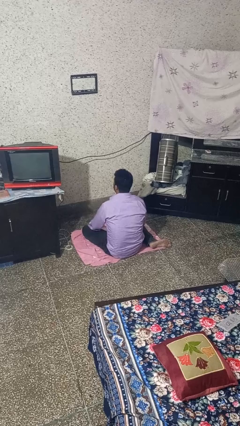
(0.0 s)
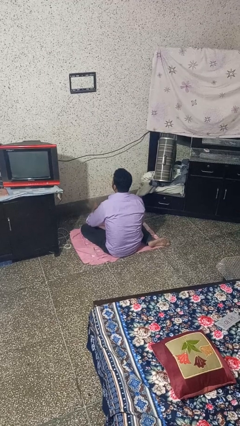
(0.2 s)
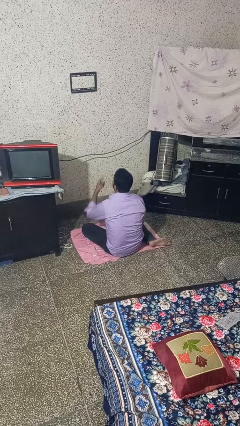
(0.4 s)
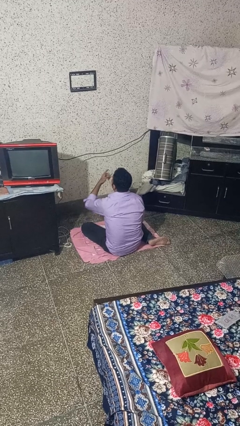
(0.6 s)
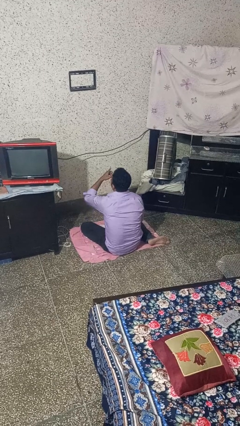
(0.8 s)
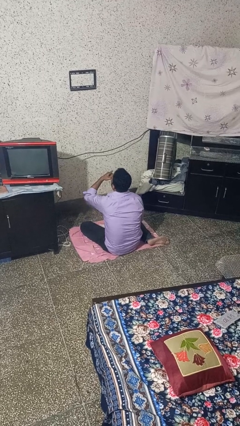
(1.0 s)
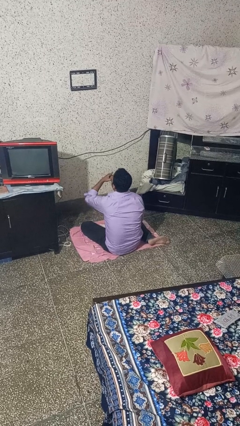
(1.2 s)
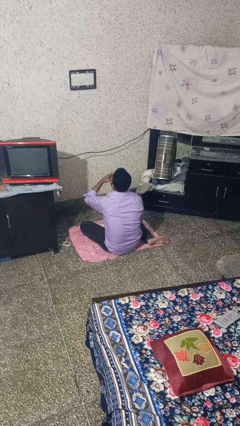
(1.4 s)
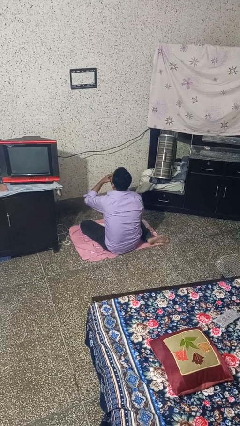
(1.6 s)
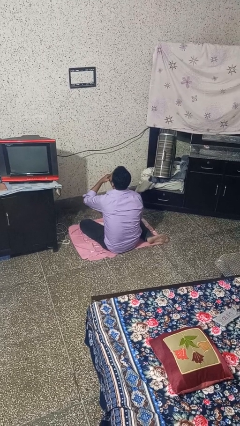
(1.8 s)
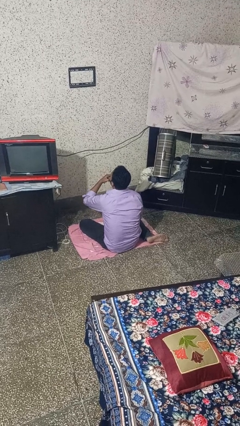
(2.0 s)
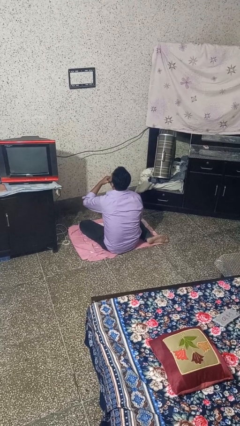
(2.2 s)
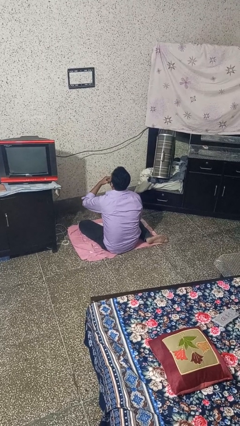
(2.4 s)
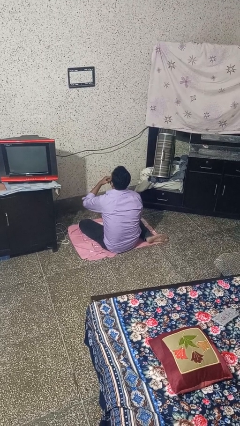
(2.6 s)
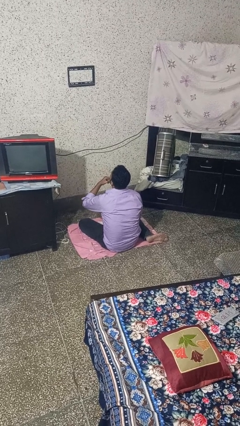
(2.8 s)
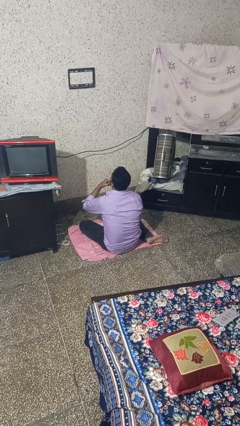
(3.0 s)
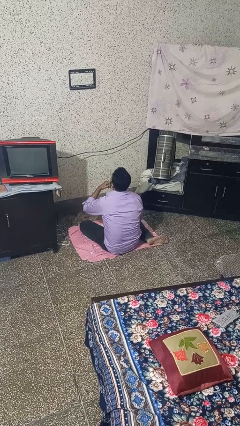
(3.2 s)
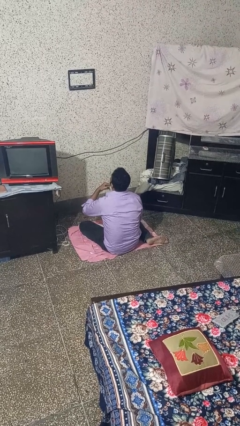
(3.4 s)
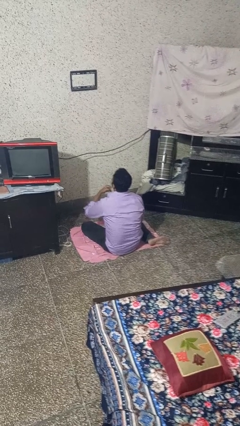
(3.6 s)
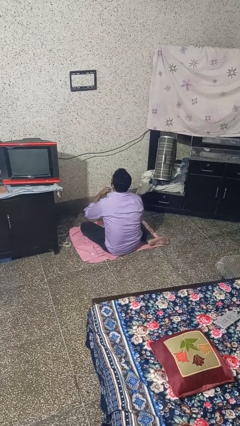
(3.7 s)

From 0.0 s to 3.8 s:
person licks fingers

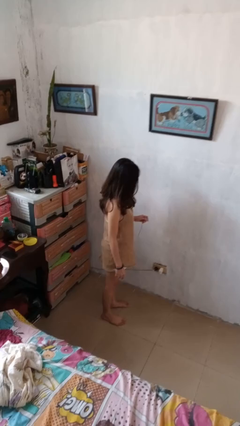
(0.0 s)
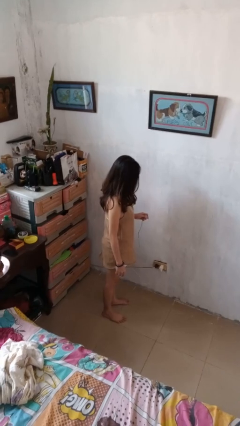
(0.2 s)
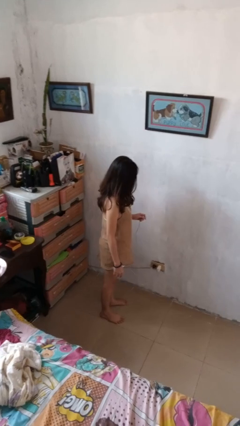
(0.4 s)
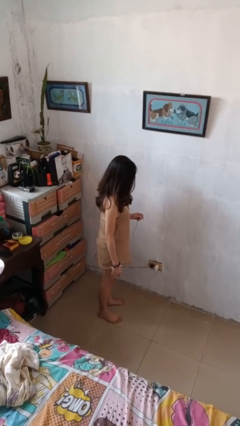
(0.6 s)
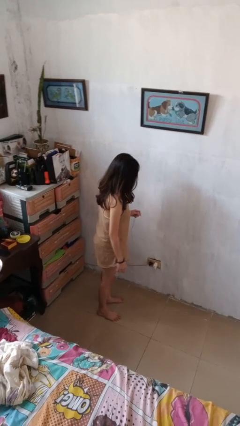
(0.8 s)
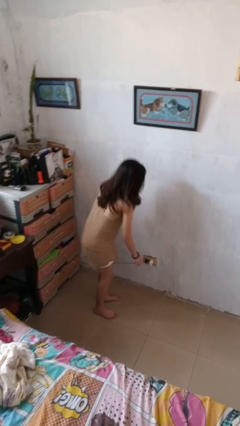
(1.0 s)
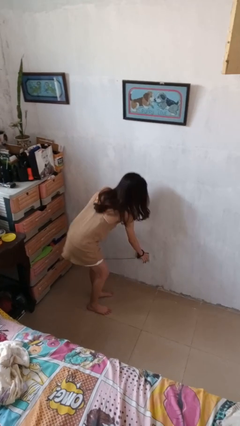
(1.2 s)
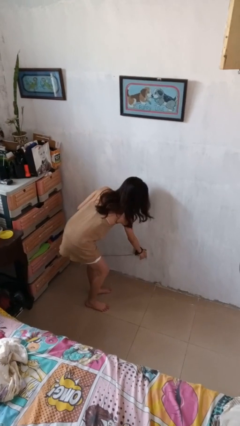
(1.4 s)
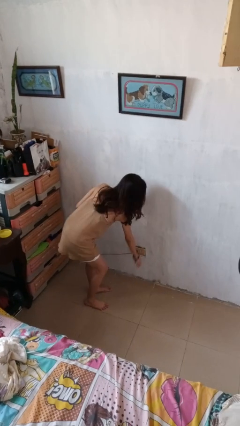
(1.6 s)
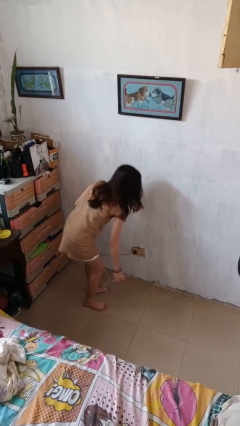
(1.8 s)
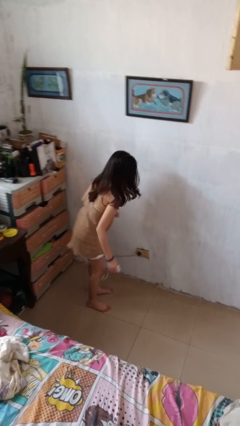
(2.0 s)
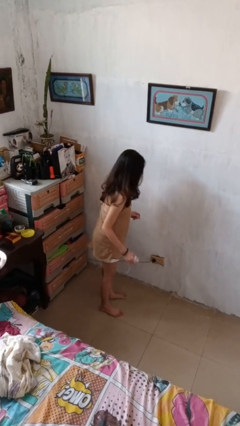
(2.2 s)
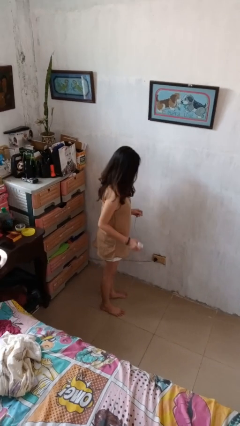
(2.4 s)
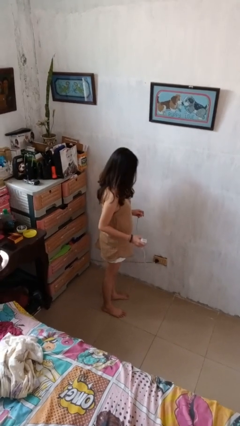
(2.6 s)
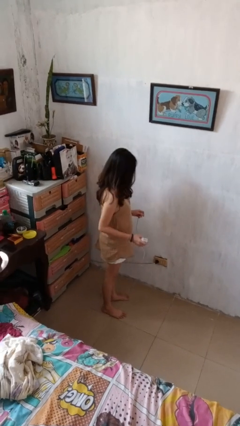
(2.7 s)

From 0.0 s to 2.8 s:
person unplugs from electrical socket

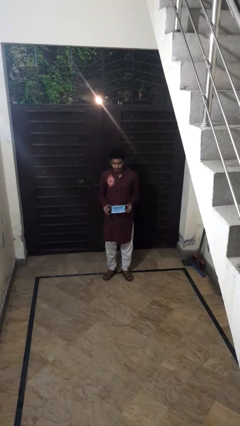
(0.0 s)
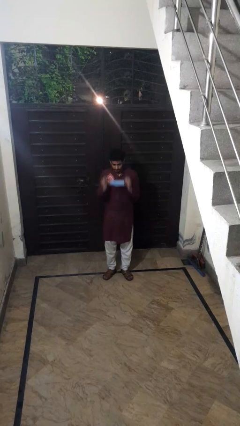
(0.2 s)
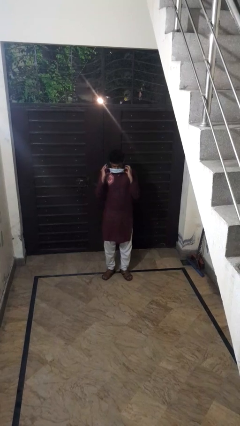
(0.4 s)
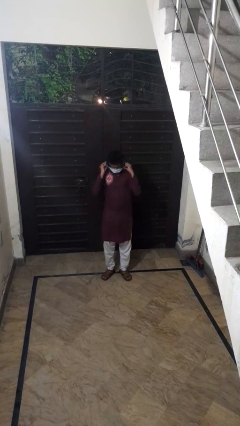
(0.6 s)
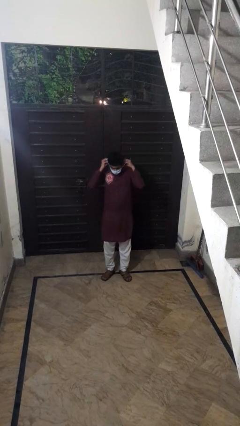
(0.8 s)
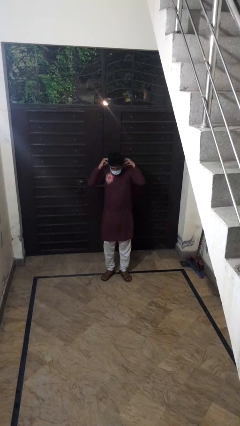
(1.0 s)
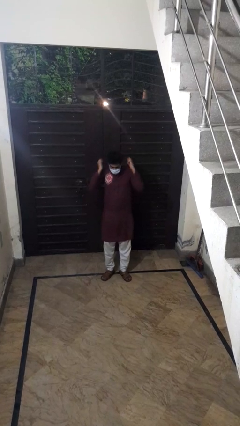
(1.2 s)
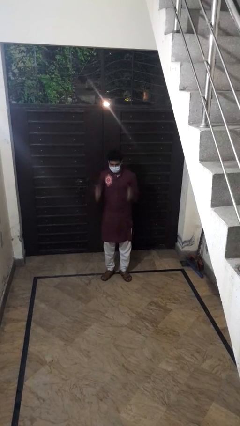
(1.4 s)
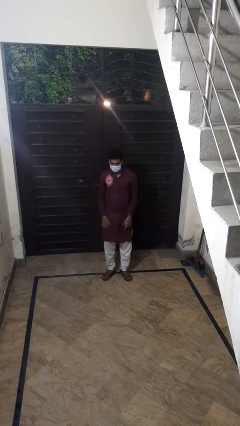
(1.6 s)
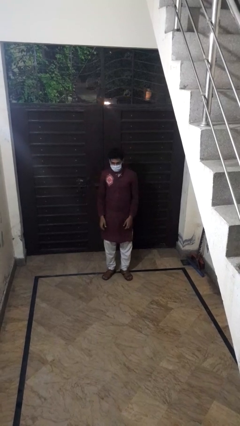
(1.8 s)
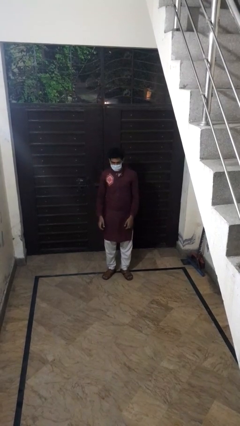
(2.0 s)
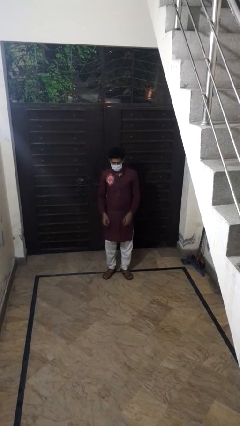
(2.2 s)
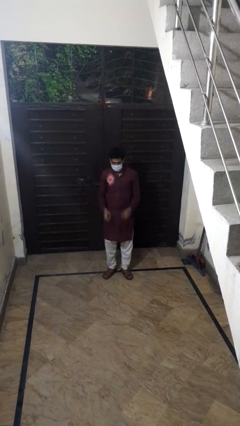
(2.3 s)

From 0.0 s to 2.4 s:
person puts on facemask

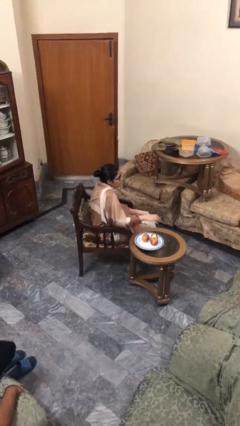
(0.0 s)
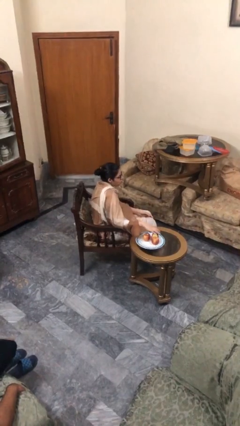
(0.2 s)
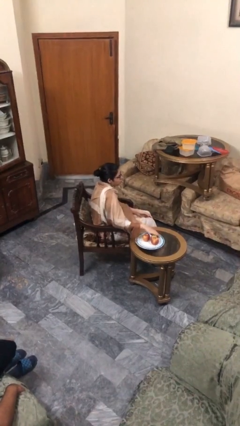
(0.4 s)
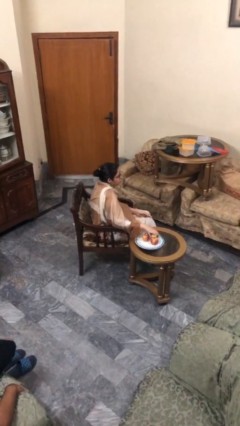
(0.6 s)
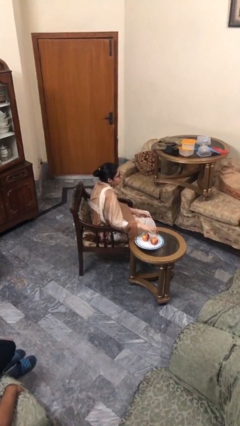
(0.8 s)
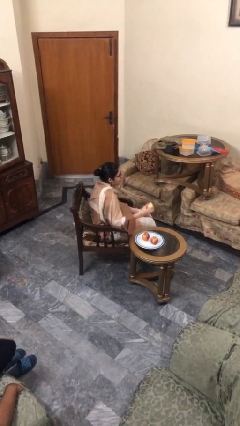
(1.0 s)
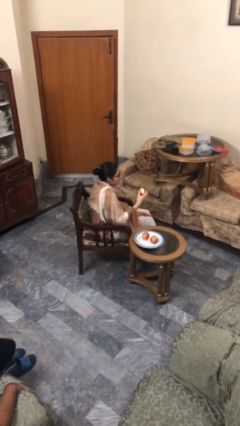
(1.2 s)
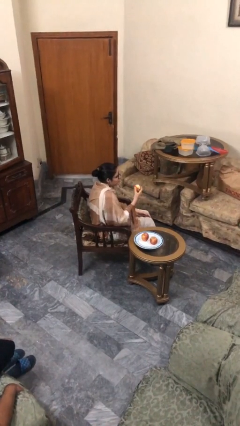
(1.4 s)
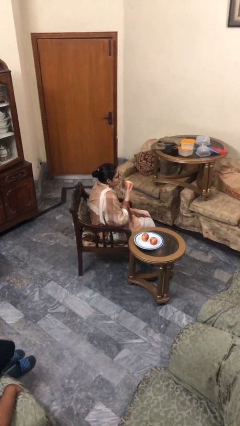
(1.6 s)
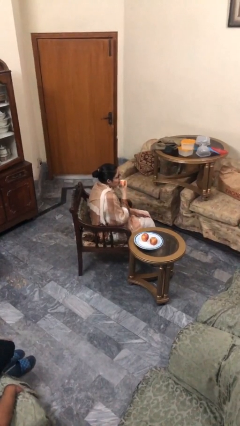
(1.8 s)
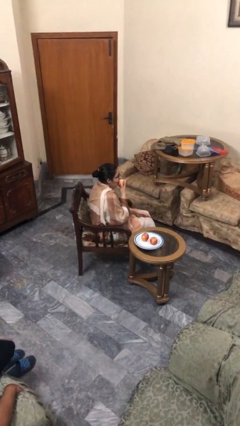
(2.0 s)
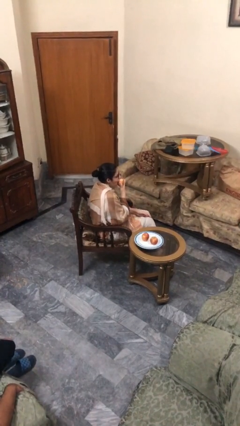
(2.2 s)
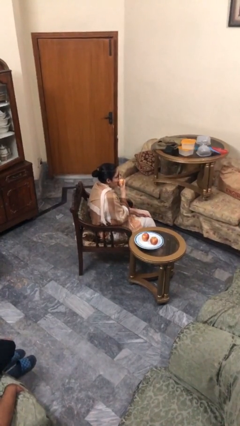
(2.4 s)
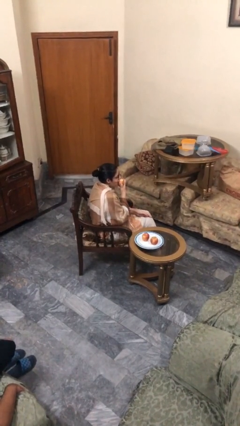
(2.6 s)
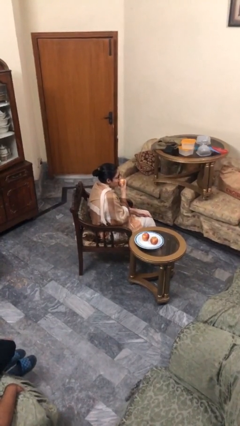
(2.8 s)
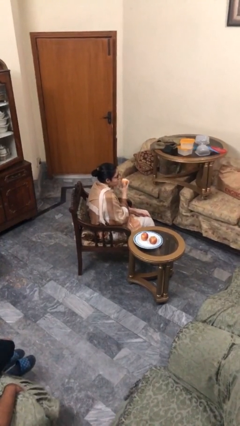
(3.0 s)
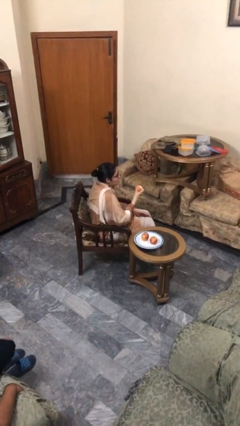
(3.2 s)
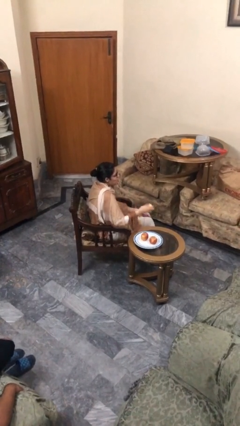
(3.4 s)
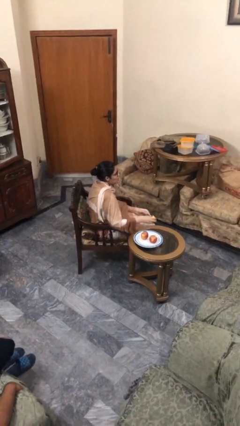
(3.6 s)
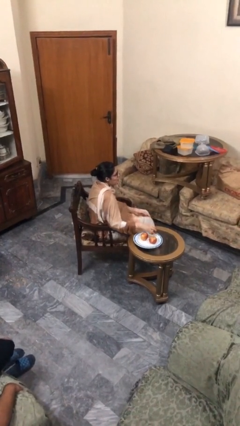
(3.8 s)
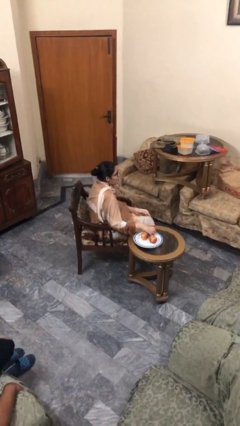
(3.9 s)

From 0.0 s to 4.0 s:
person eats apple

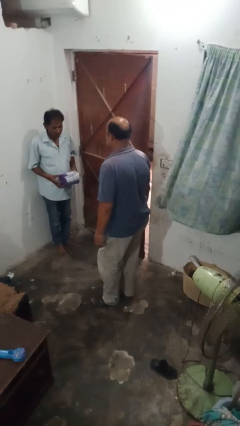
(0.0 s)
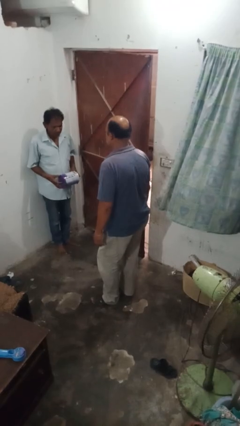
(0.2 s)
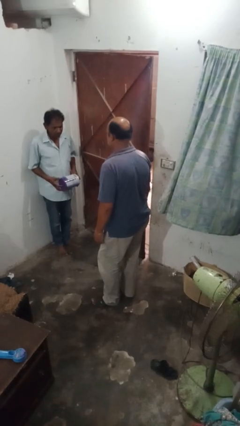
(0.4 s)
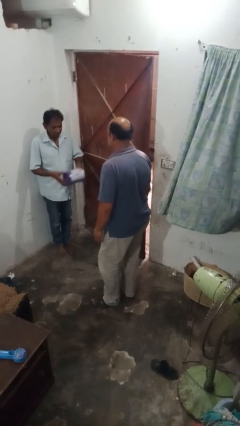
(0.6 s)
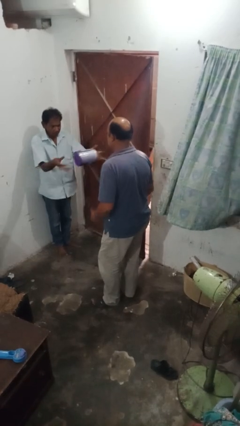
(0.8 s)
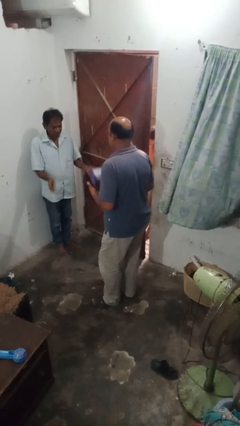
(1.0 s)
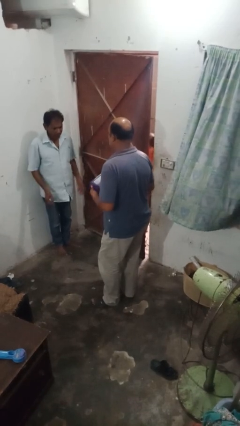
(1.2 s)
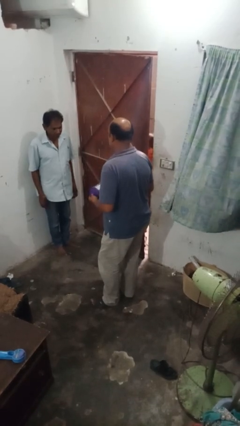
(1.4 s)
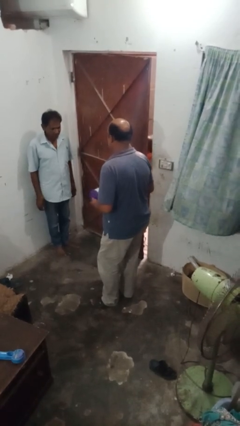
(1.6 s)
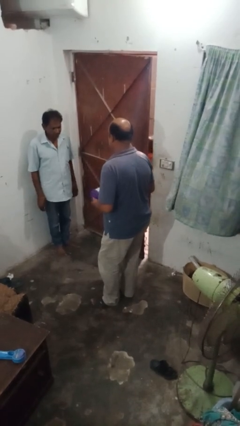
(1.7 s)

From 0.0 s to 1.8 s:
person catches object from person

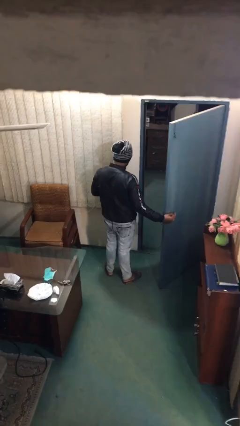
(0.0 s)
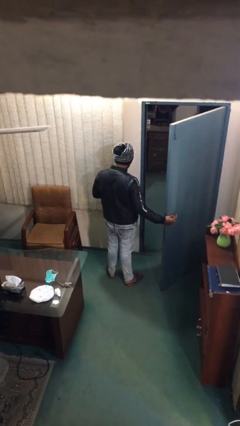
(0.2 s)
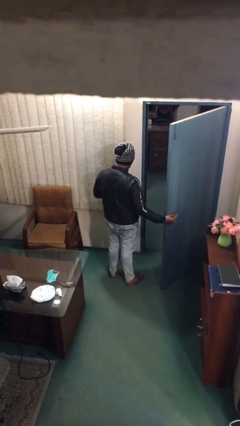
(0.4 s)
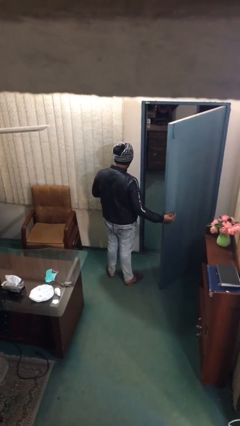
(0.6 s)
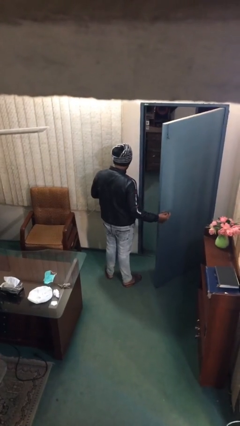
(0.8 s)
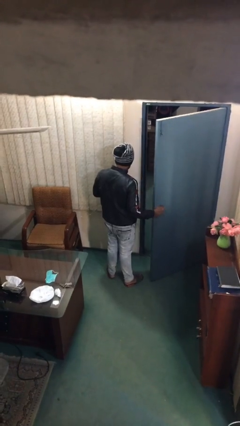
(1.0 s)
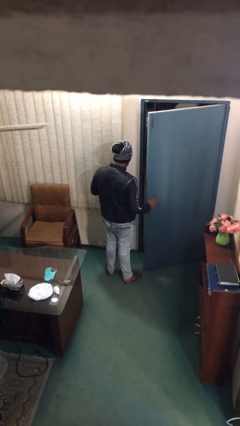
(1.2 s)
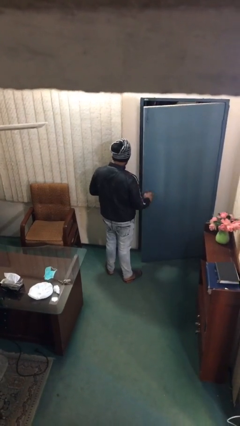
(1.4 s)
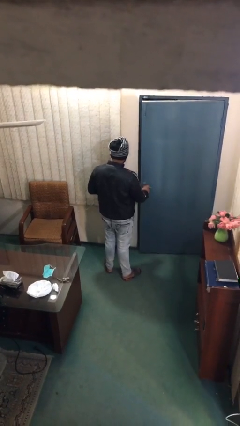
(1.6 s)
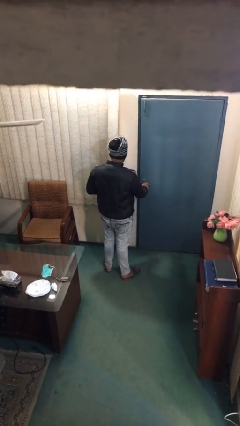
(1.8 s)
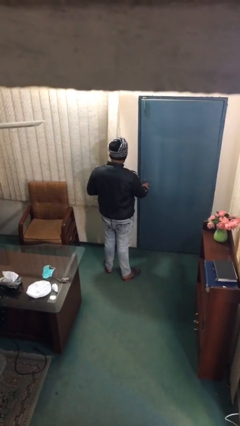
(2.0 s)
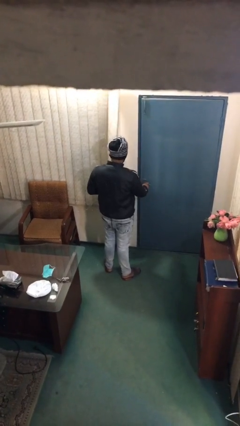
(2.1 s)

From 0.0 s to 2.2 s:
person closes facility door

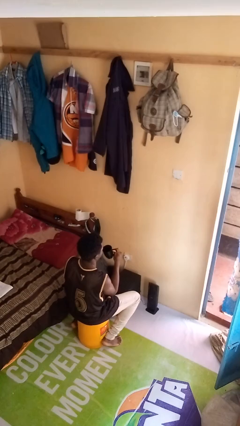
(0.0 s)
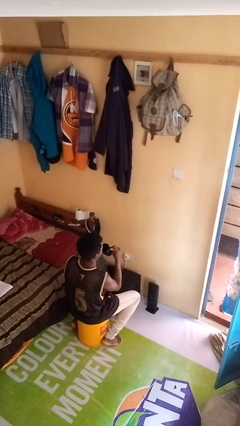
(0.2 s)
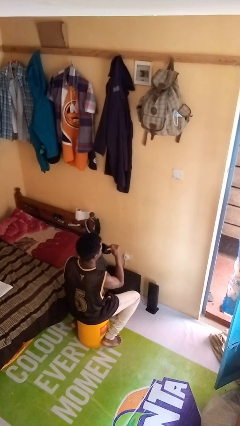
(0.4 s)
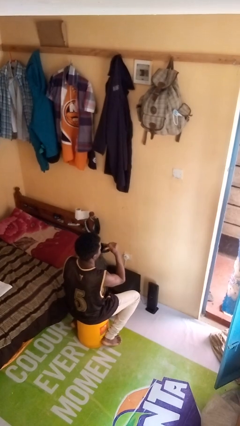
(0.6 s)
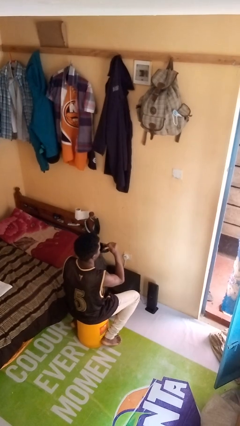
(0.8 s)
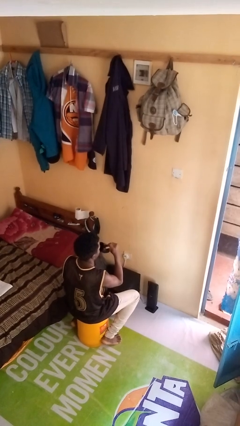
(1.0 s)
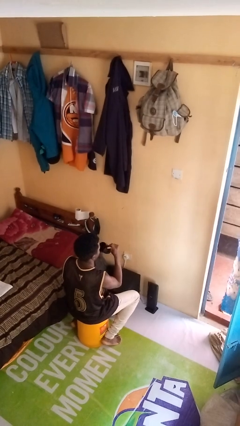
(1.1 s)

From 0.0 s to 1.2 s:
person drinks from mug
